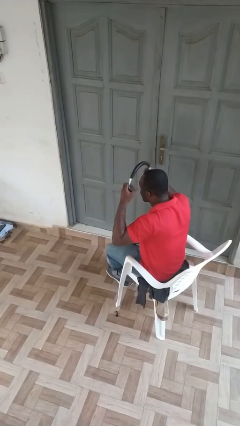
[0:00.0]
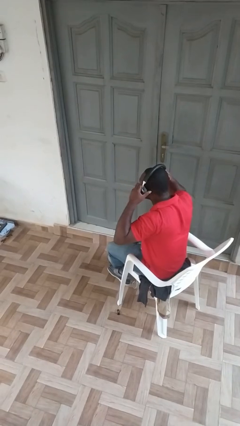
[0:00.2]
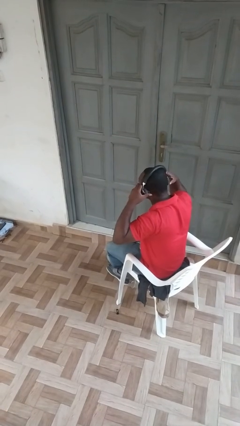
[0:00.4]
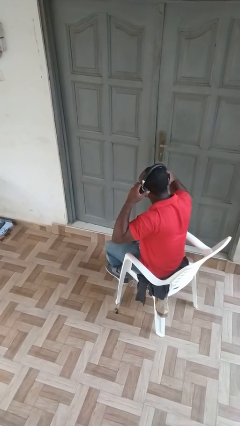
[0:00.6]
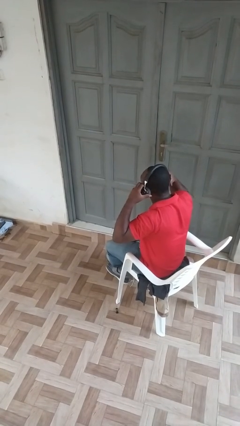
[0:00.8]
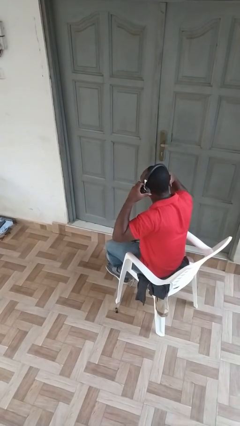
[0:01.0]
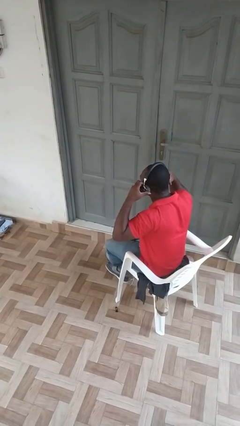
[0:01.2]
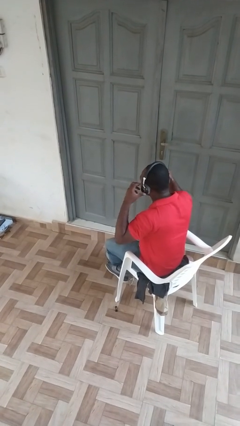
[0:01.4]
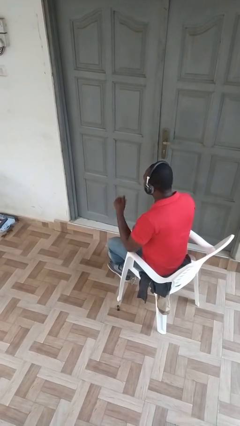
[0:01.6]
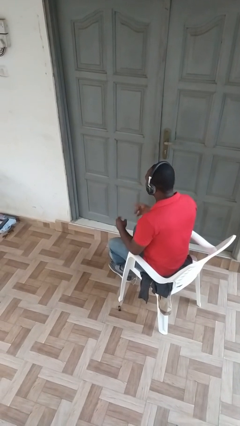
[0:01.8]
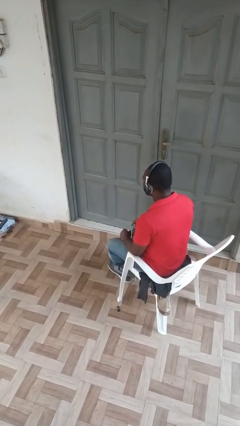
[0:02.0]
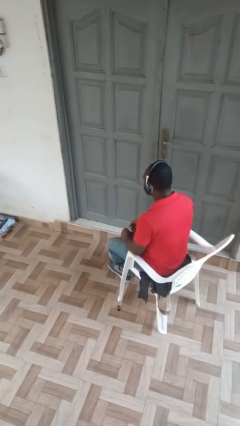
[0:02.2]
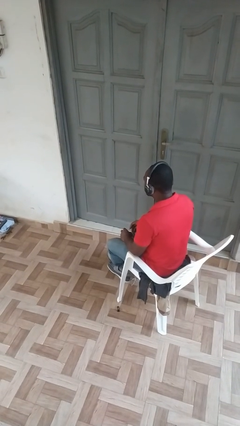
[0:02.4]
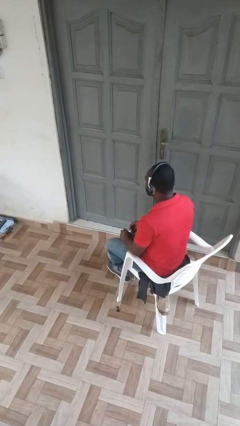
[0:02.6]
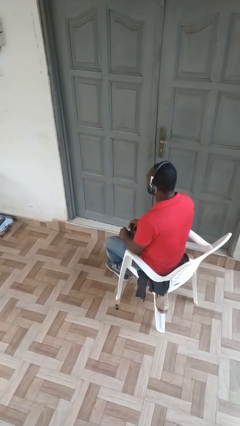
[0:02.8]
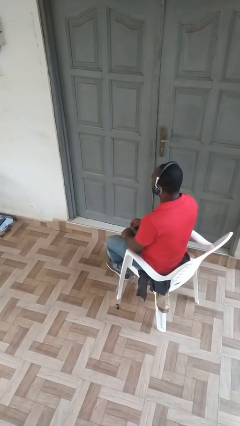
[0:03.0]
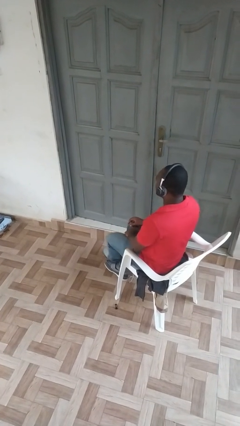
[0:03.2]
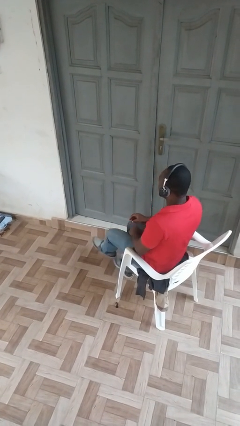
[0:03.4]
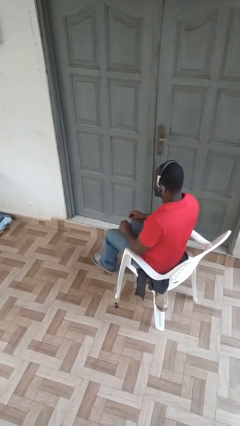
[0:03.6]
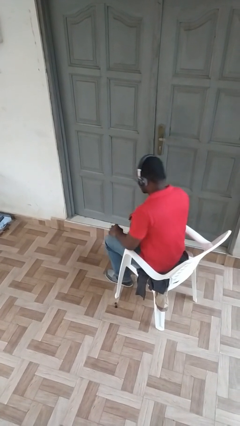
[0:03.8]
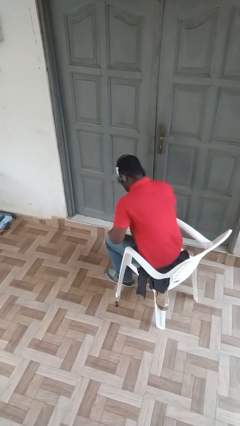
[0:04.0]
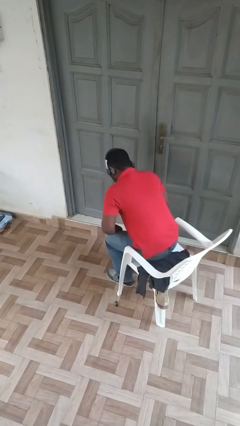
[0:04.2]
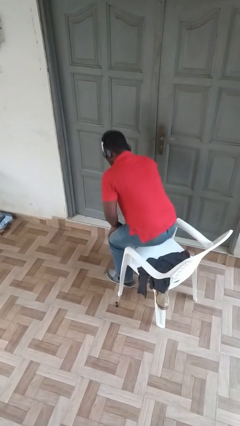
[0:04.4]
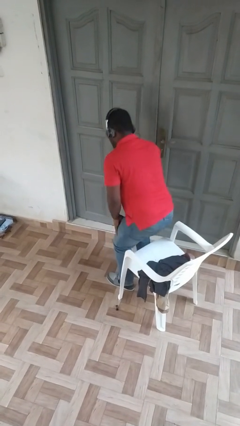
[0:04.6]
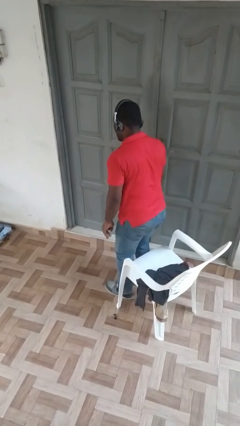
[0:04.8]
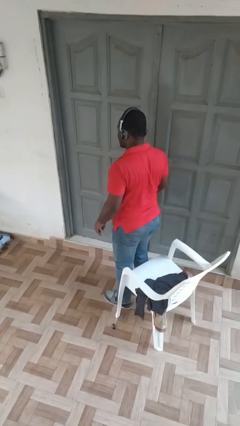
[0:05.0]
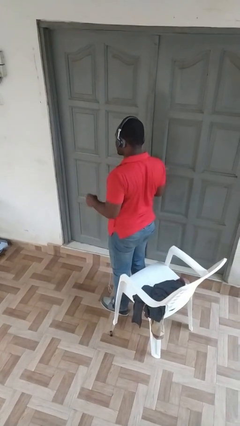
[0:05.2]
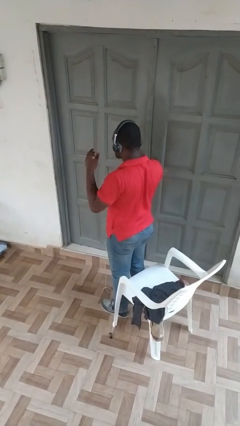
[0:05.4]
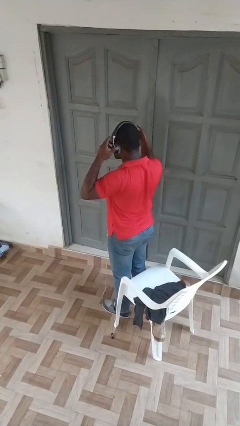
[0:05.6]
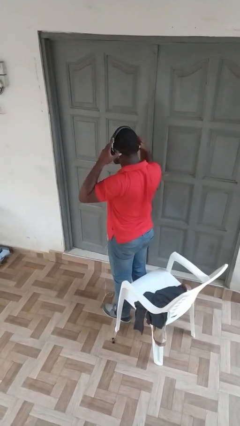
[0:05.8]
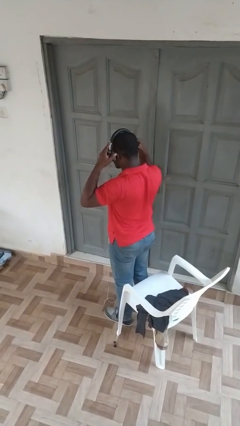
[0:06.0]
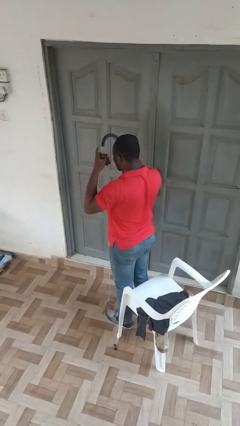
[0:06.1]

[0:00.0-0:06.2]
person puts on headphones

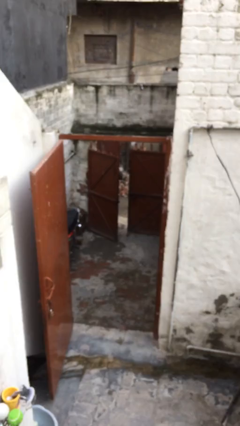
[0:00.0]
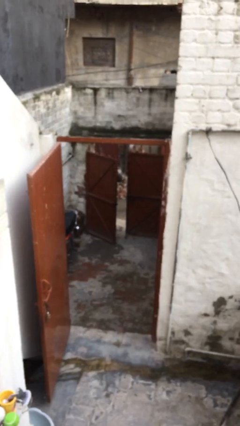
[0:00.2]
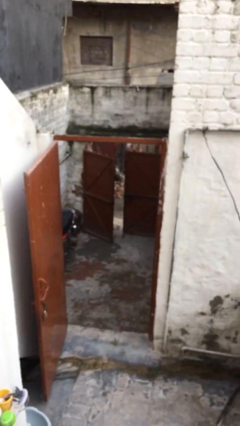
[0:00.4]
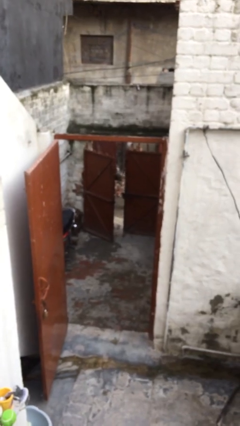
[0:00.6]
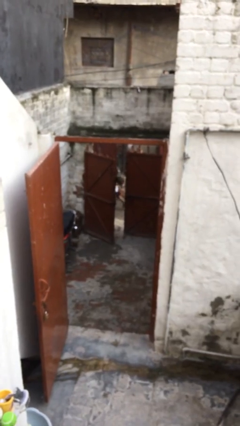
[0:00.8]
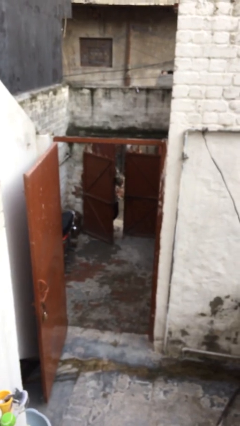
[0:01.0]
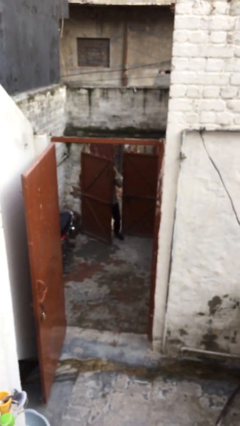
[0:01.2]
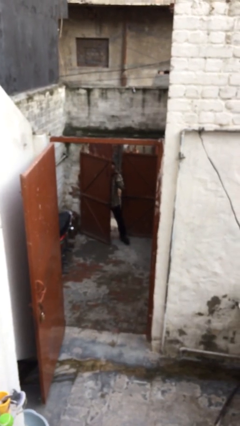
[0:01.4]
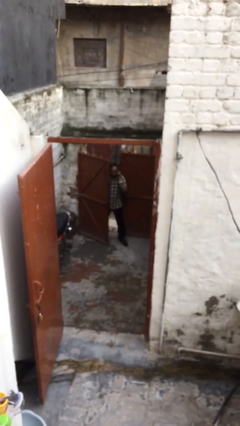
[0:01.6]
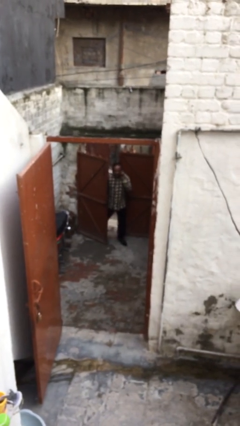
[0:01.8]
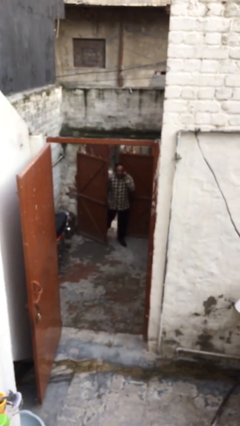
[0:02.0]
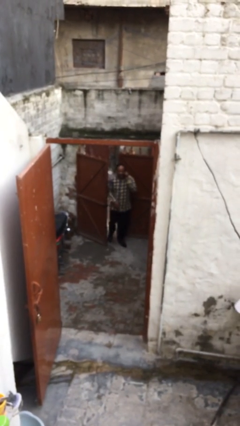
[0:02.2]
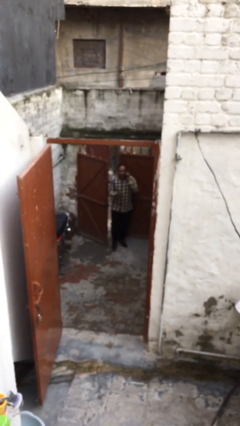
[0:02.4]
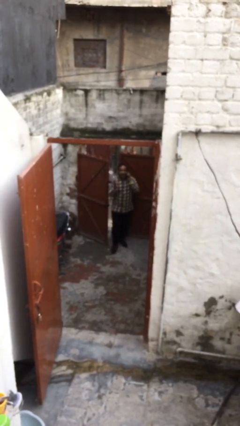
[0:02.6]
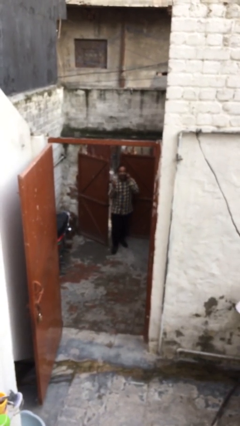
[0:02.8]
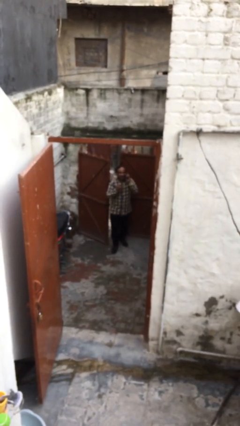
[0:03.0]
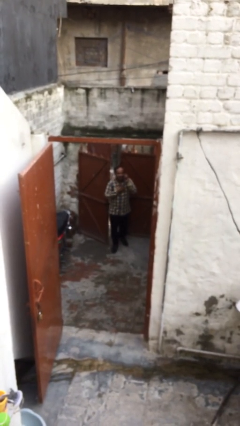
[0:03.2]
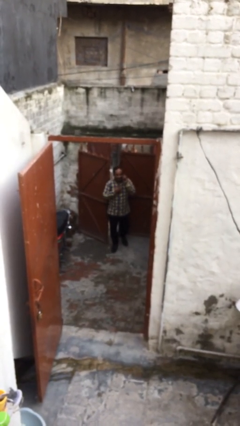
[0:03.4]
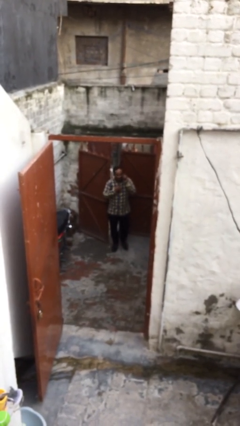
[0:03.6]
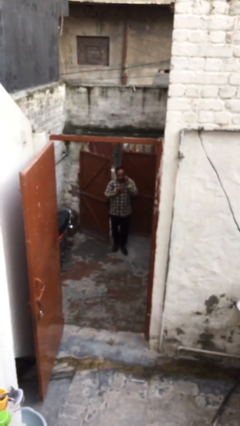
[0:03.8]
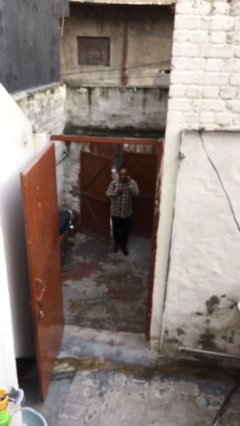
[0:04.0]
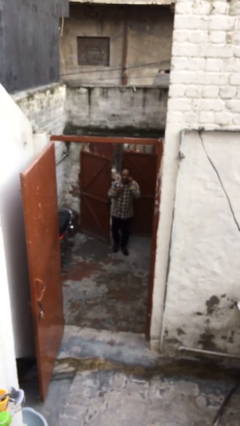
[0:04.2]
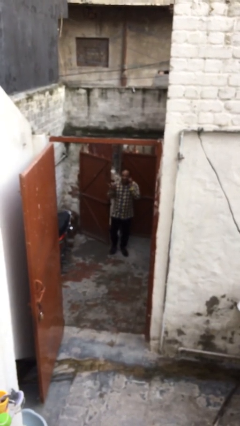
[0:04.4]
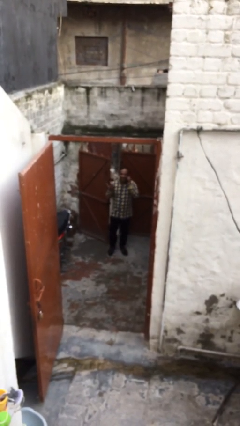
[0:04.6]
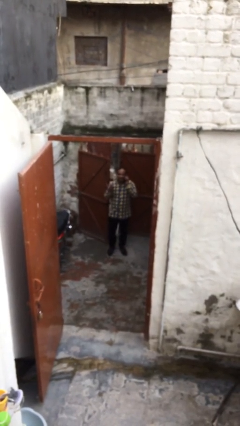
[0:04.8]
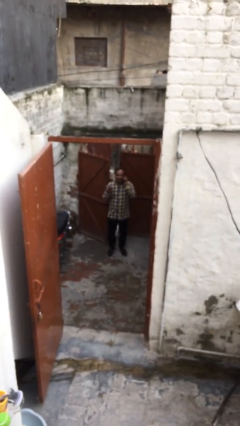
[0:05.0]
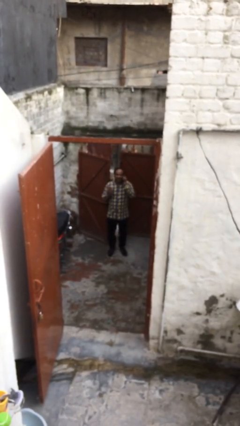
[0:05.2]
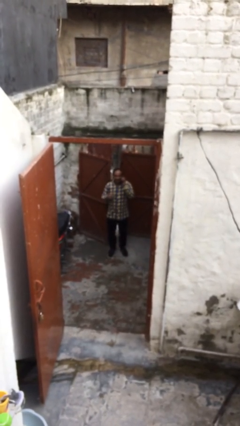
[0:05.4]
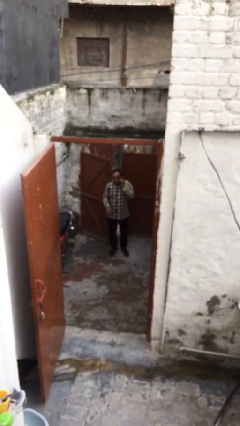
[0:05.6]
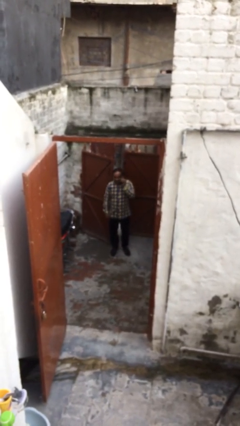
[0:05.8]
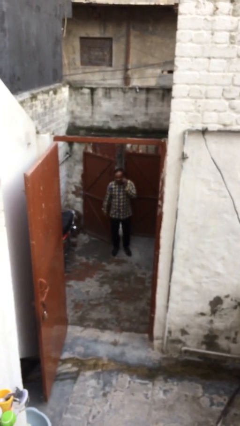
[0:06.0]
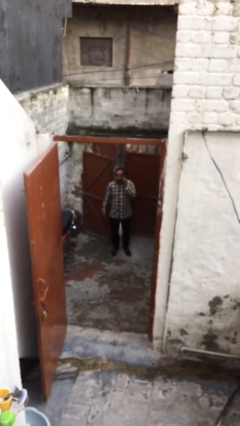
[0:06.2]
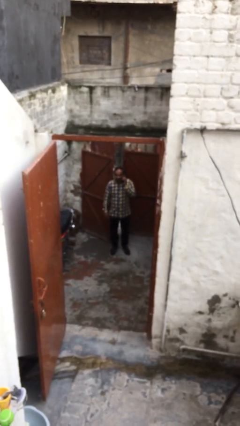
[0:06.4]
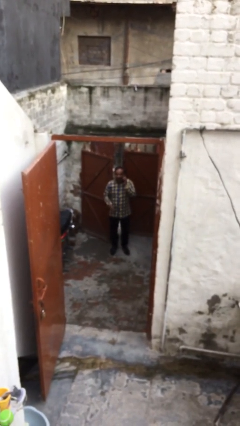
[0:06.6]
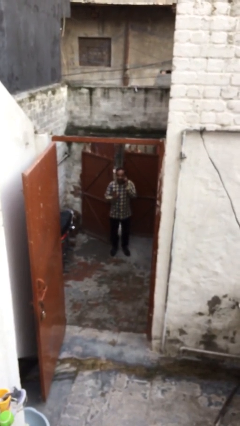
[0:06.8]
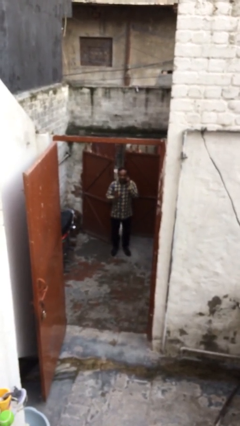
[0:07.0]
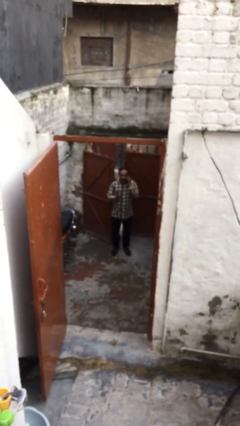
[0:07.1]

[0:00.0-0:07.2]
person enters scene through structure

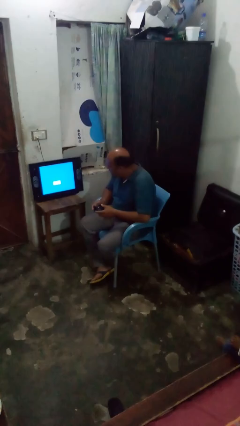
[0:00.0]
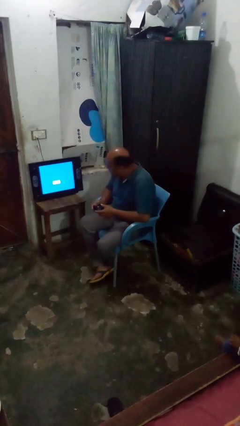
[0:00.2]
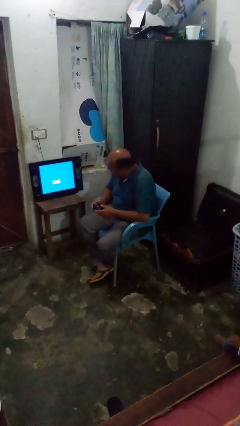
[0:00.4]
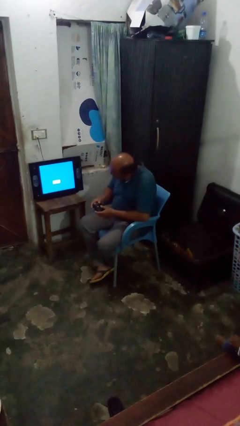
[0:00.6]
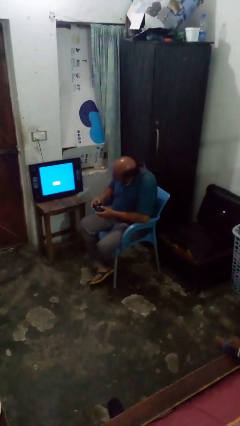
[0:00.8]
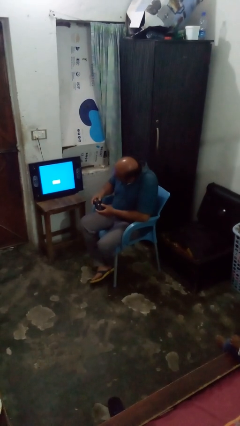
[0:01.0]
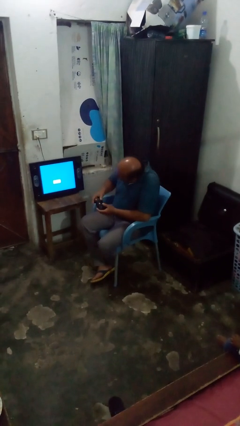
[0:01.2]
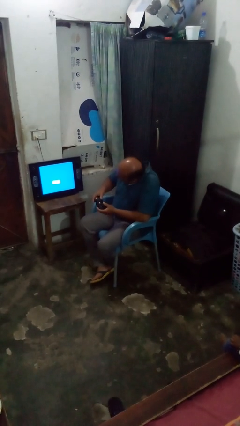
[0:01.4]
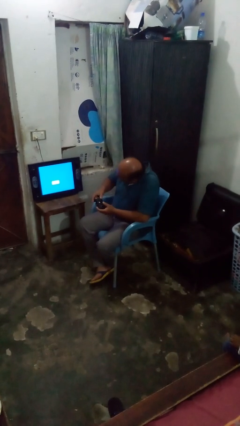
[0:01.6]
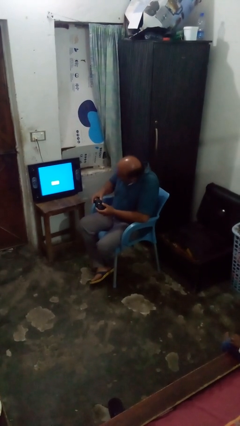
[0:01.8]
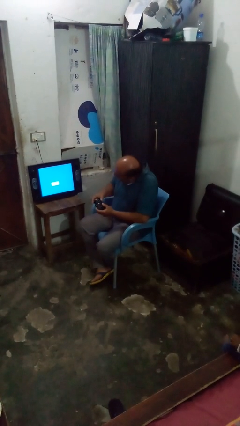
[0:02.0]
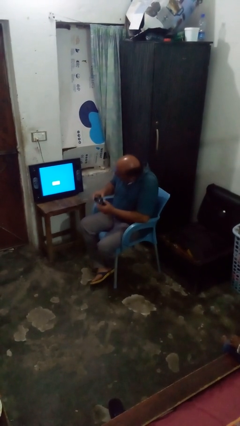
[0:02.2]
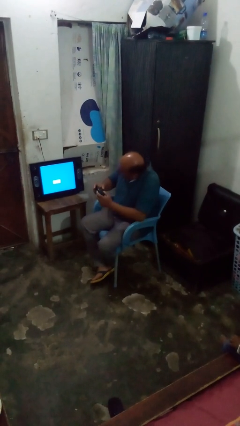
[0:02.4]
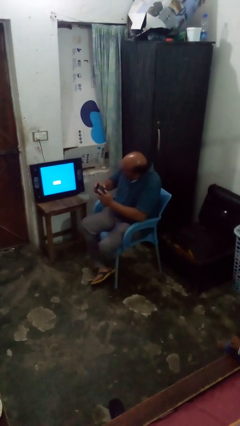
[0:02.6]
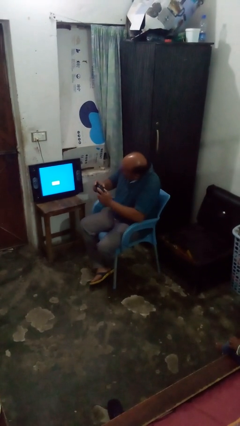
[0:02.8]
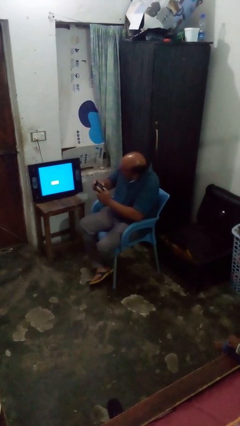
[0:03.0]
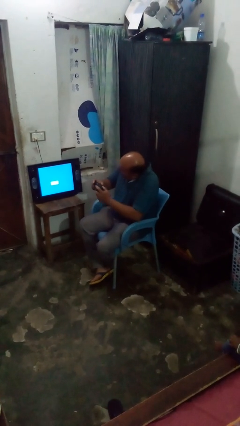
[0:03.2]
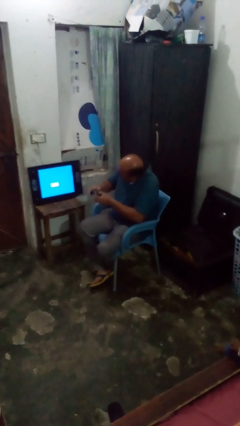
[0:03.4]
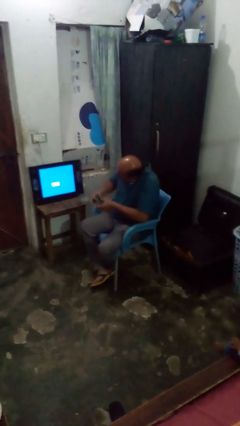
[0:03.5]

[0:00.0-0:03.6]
person interacts with handheld game

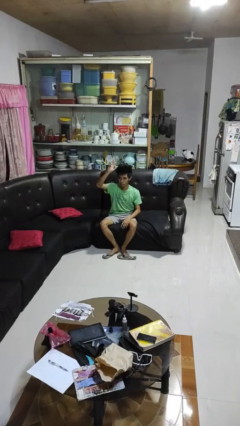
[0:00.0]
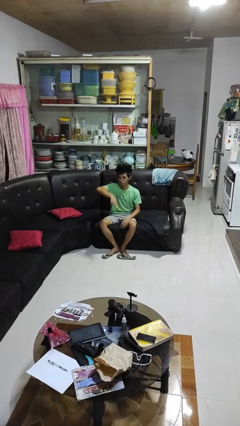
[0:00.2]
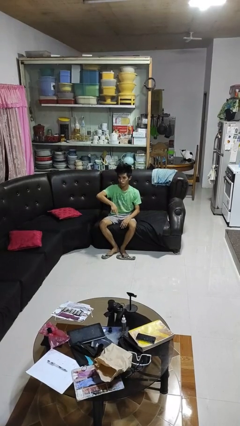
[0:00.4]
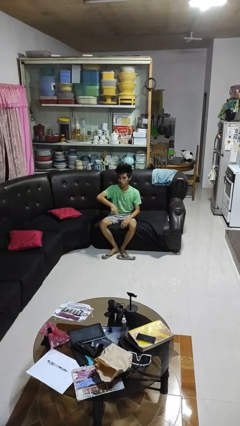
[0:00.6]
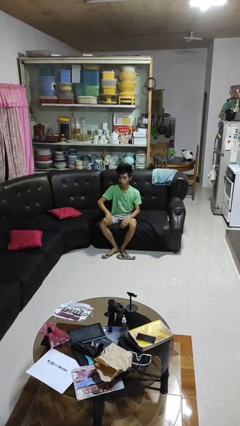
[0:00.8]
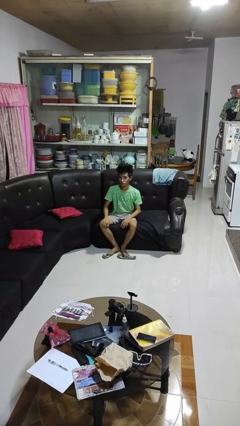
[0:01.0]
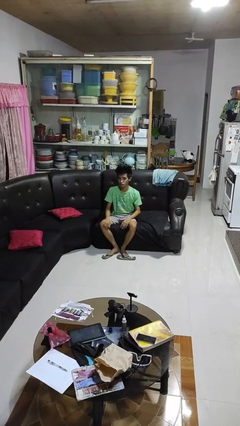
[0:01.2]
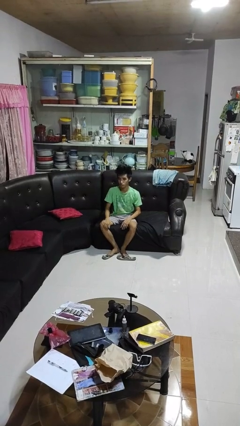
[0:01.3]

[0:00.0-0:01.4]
person gestures swipe down
